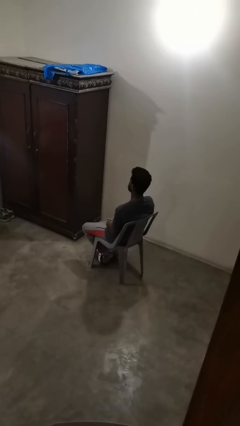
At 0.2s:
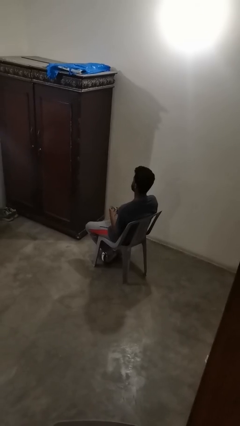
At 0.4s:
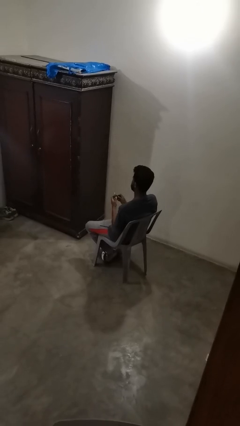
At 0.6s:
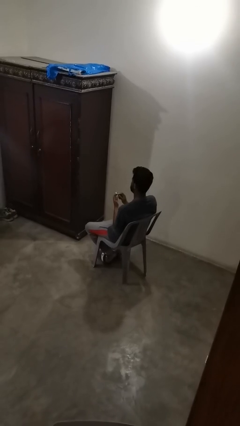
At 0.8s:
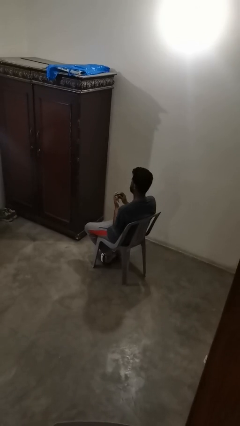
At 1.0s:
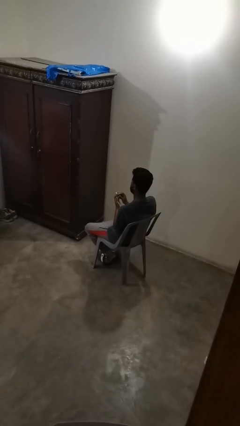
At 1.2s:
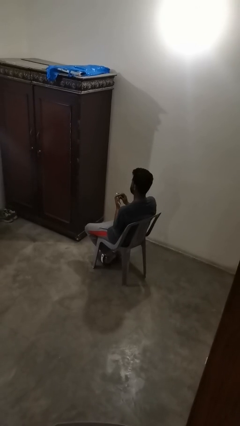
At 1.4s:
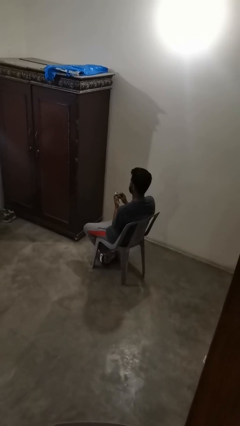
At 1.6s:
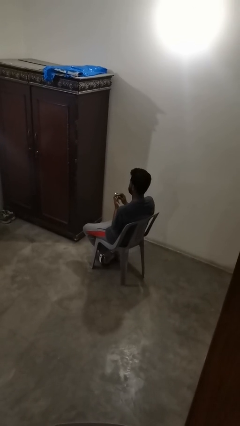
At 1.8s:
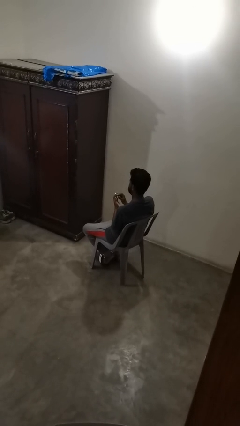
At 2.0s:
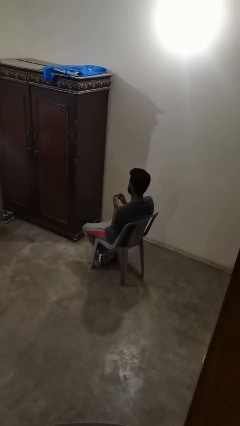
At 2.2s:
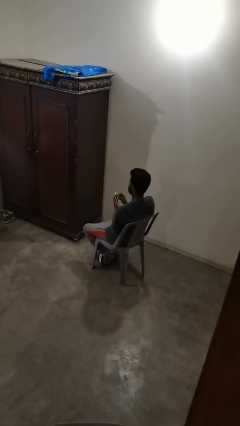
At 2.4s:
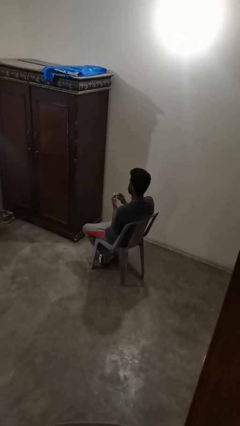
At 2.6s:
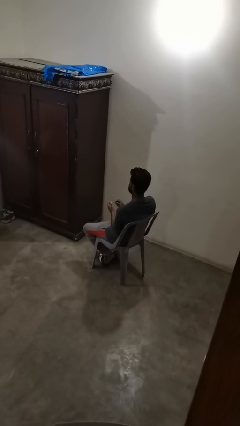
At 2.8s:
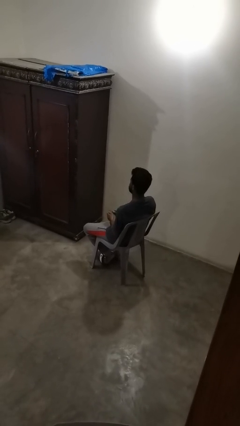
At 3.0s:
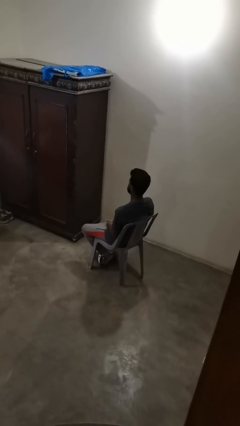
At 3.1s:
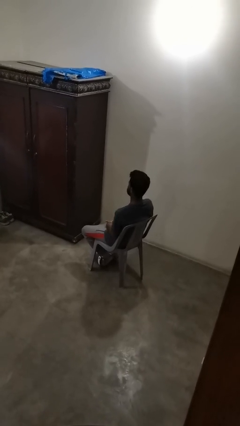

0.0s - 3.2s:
person files fingernails

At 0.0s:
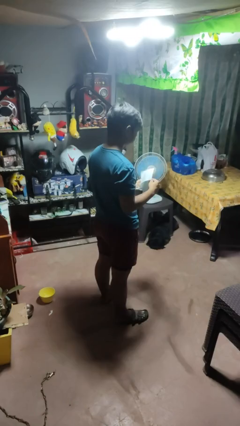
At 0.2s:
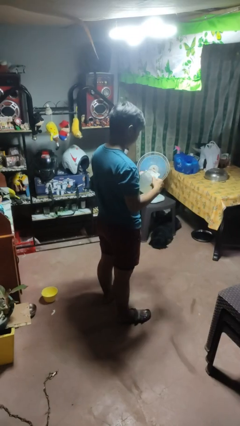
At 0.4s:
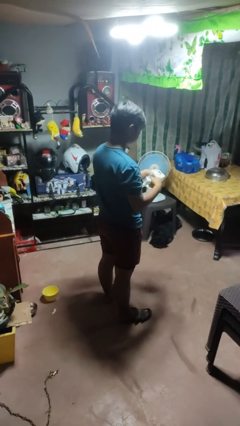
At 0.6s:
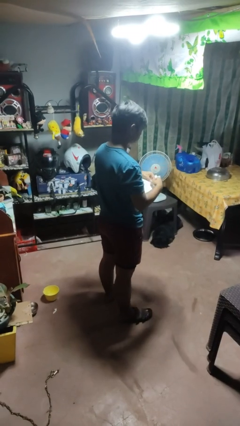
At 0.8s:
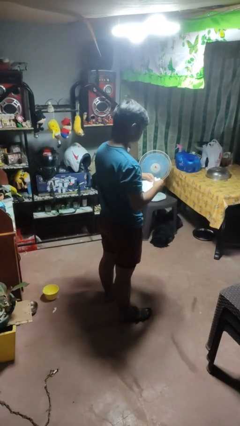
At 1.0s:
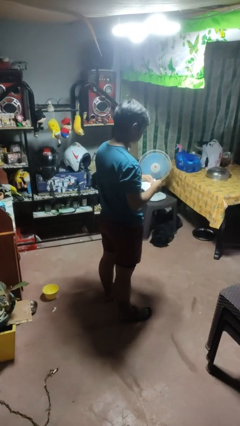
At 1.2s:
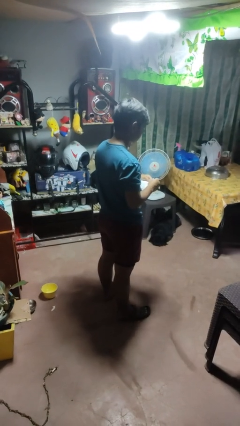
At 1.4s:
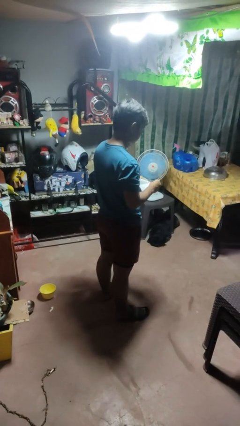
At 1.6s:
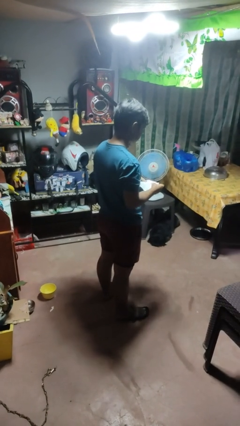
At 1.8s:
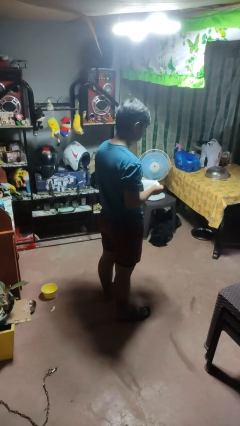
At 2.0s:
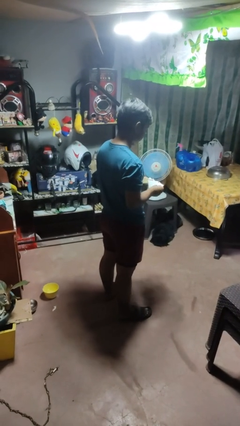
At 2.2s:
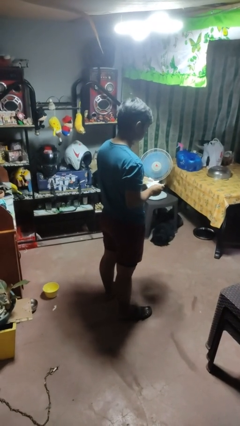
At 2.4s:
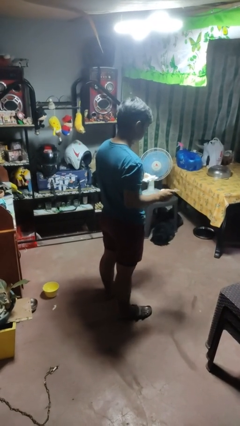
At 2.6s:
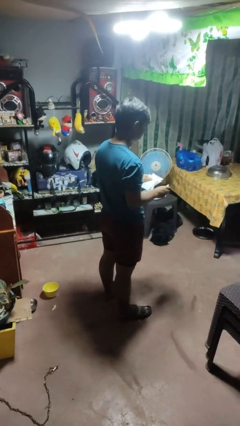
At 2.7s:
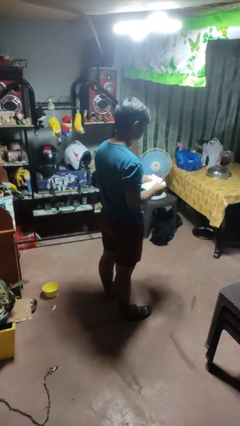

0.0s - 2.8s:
person tears paper

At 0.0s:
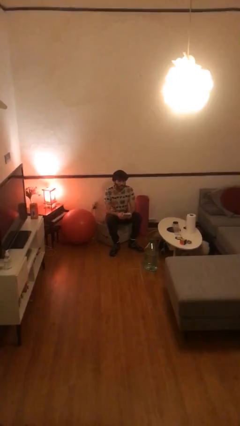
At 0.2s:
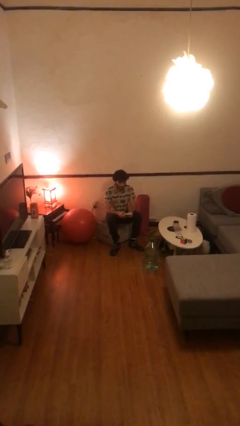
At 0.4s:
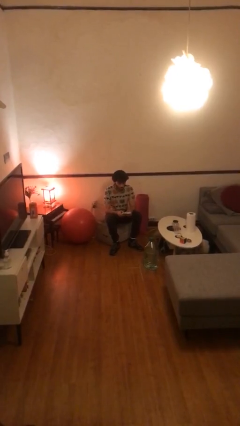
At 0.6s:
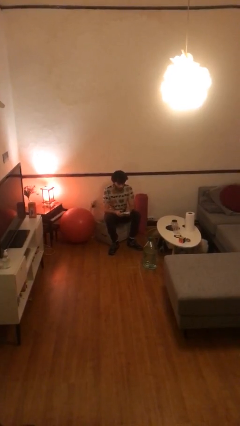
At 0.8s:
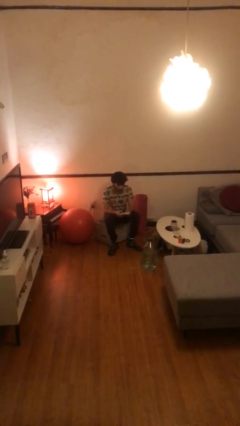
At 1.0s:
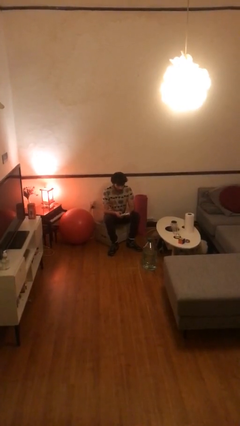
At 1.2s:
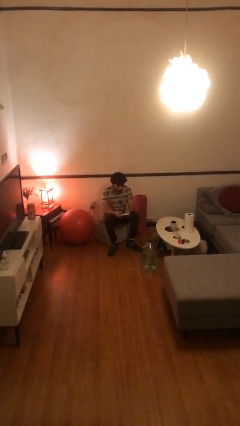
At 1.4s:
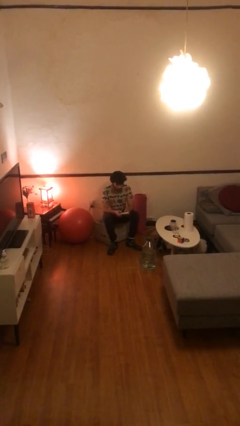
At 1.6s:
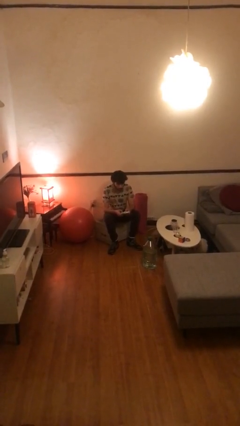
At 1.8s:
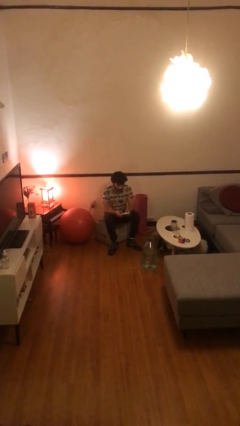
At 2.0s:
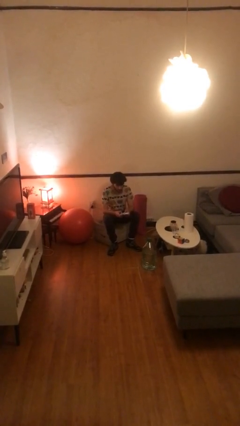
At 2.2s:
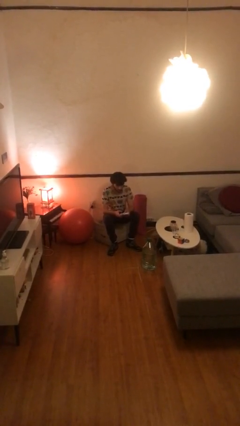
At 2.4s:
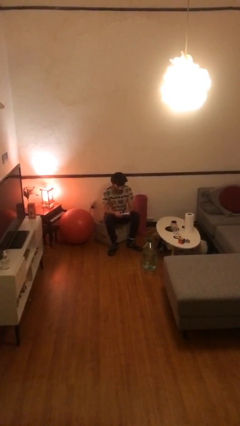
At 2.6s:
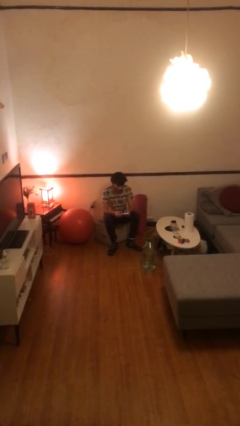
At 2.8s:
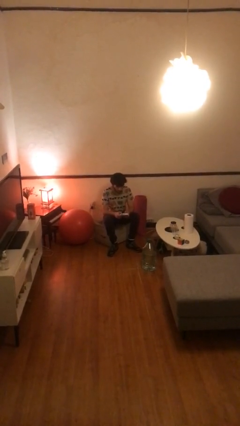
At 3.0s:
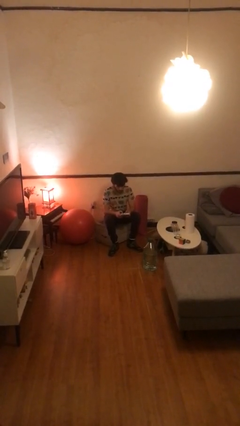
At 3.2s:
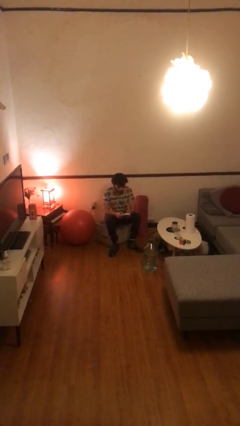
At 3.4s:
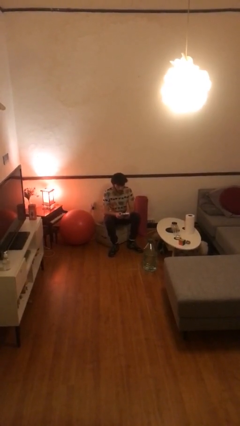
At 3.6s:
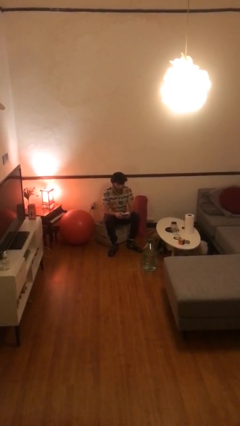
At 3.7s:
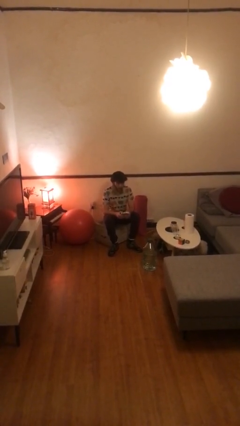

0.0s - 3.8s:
person interacts with handheld game

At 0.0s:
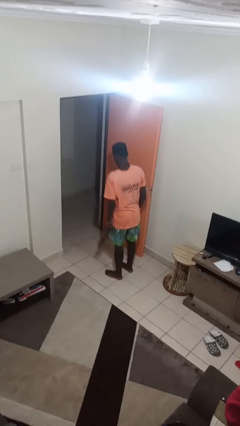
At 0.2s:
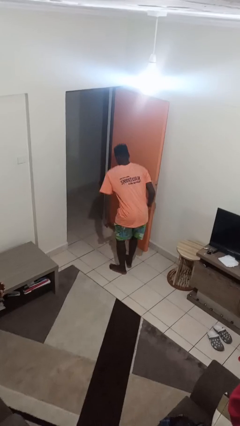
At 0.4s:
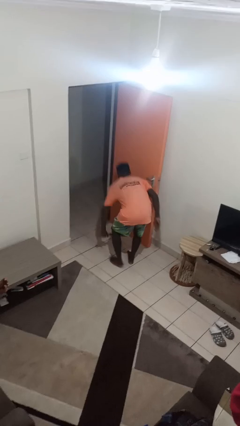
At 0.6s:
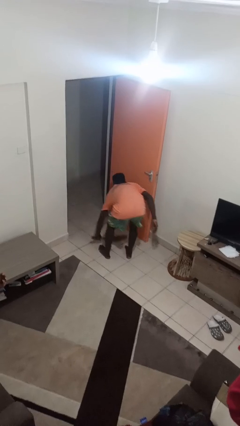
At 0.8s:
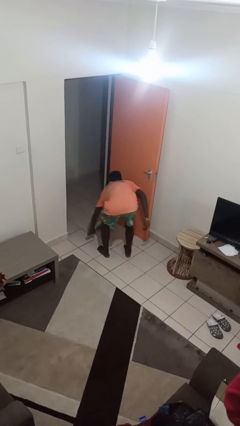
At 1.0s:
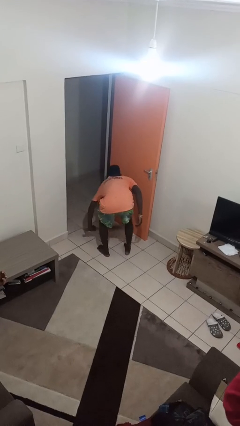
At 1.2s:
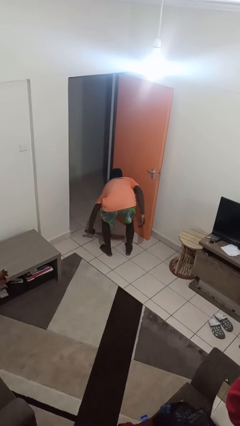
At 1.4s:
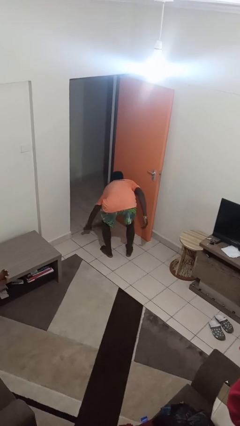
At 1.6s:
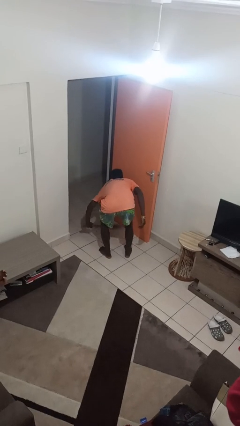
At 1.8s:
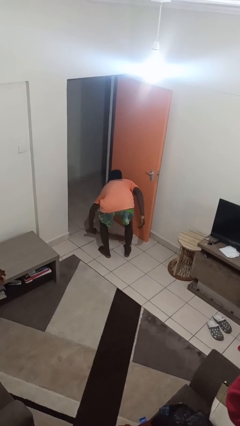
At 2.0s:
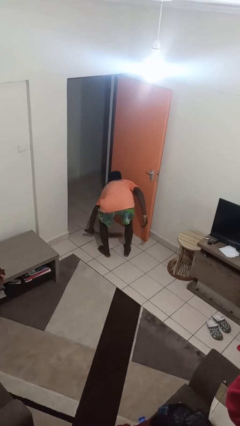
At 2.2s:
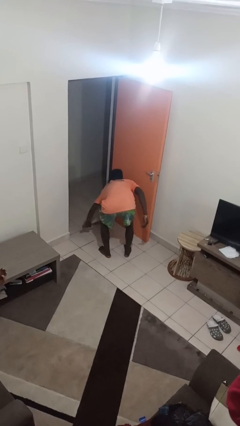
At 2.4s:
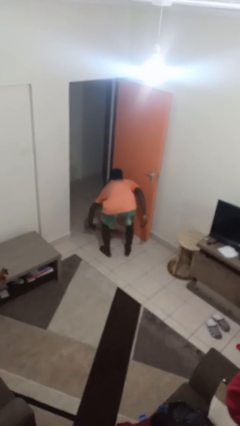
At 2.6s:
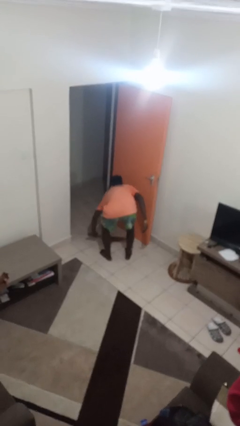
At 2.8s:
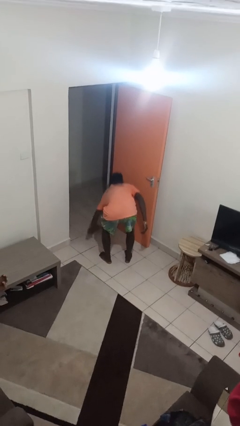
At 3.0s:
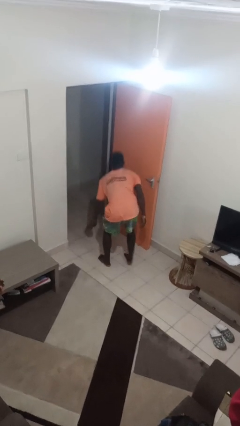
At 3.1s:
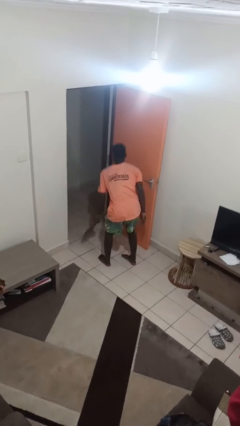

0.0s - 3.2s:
person sweeps floor

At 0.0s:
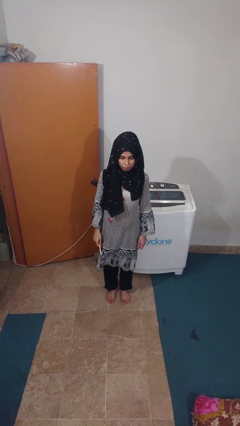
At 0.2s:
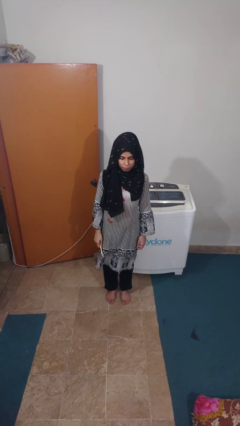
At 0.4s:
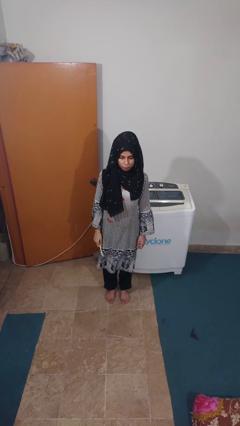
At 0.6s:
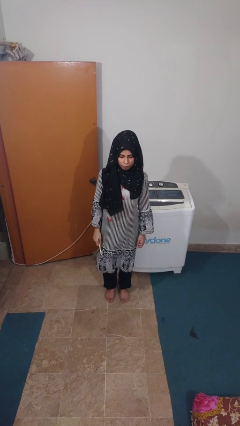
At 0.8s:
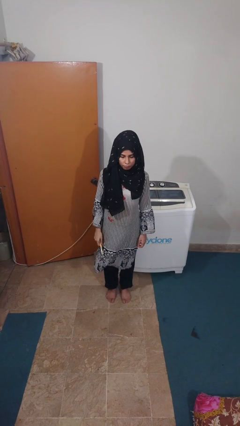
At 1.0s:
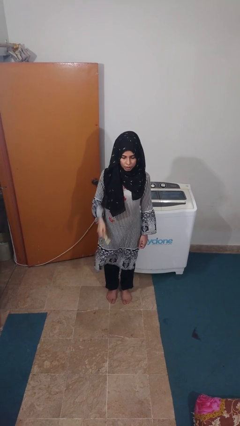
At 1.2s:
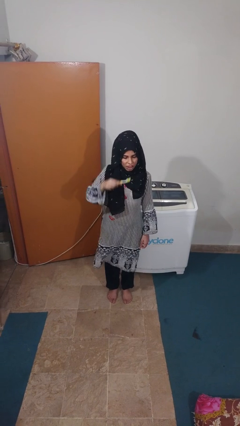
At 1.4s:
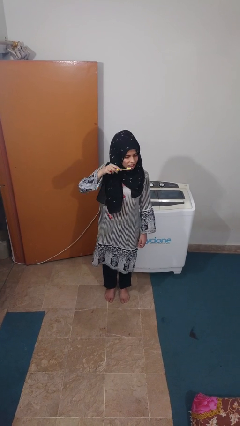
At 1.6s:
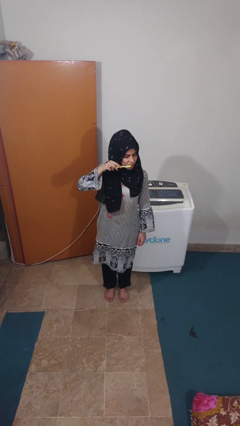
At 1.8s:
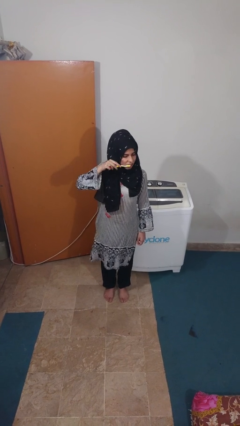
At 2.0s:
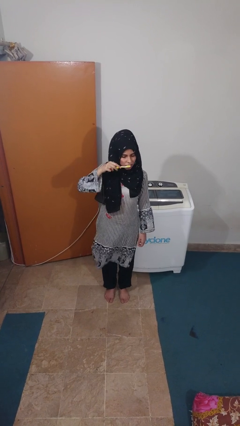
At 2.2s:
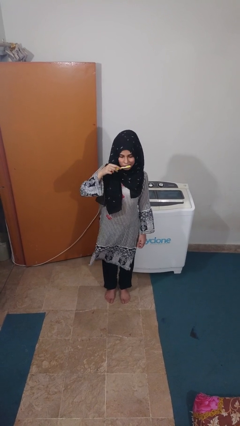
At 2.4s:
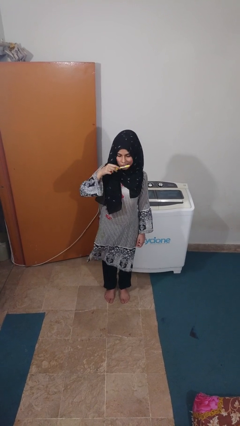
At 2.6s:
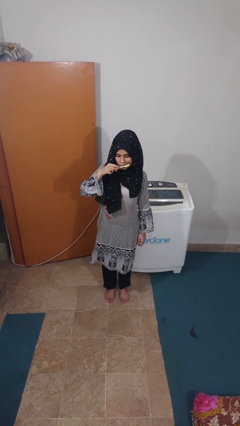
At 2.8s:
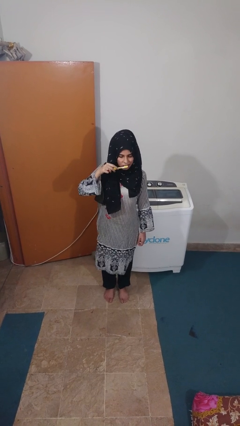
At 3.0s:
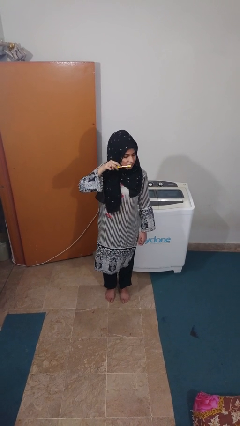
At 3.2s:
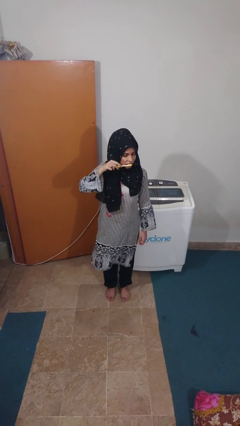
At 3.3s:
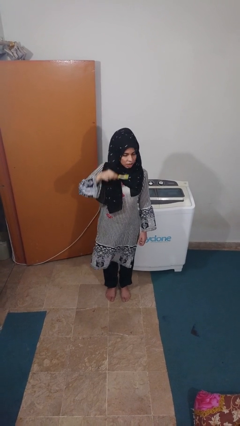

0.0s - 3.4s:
person brushes teeth

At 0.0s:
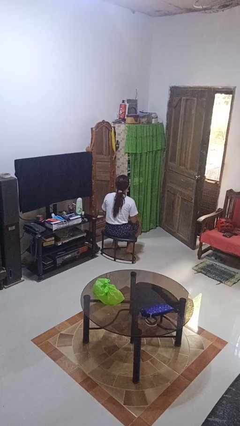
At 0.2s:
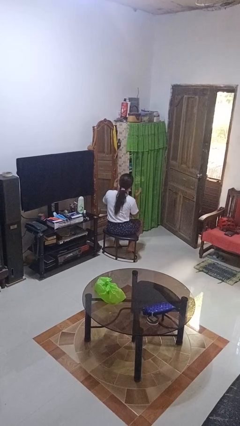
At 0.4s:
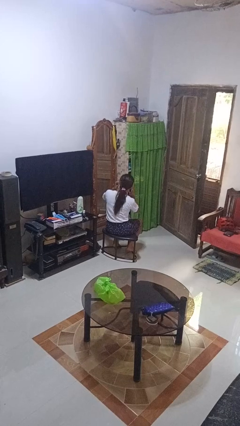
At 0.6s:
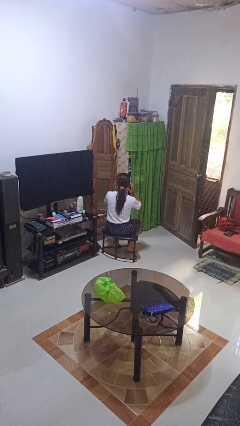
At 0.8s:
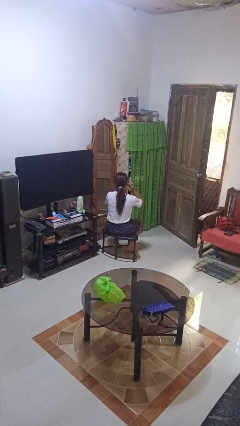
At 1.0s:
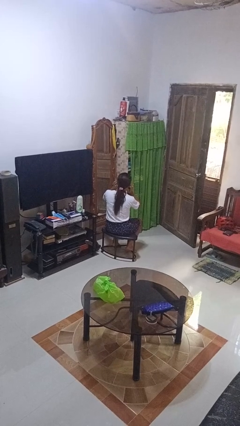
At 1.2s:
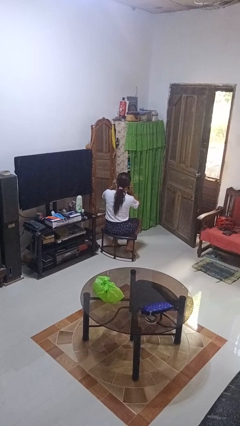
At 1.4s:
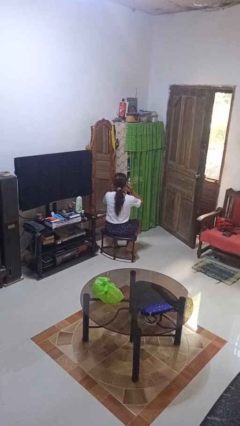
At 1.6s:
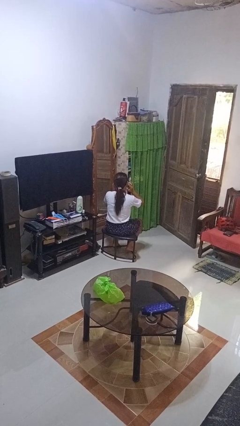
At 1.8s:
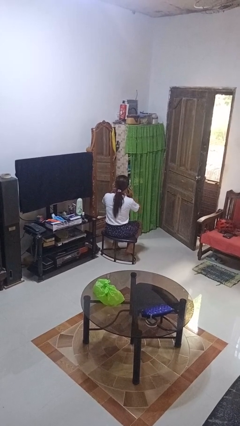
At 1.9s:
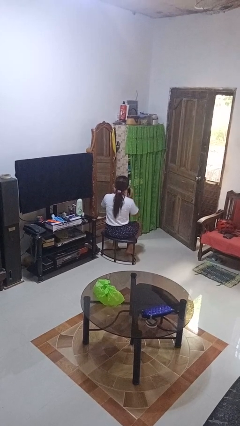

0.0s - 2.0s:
person puts fingers in ear
